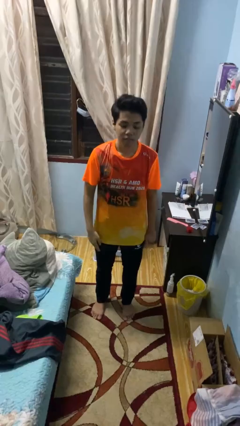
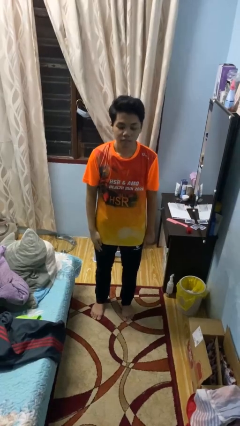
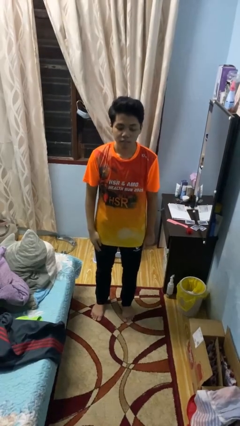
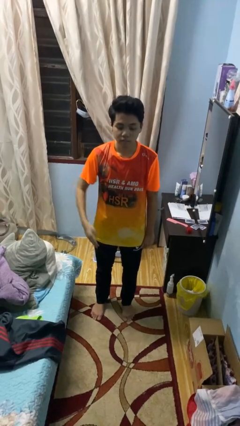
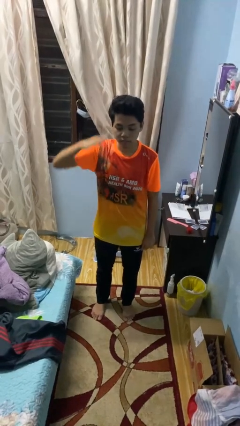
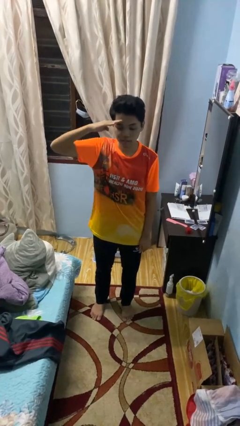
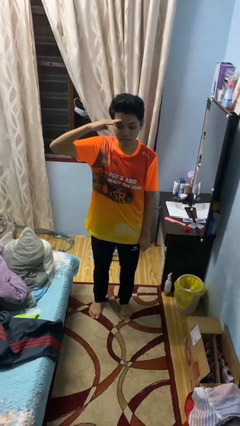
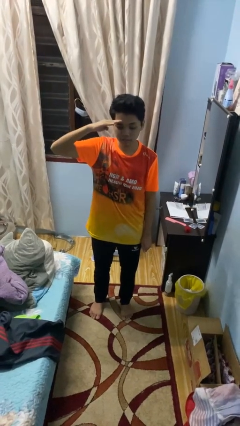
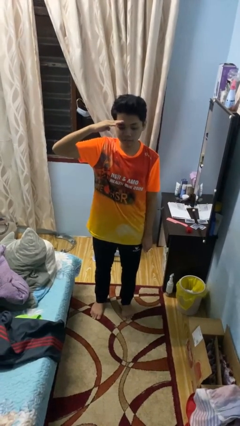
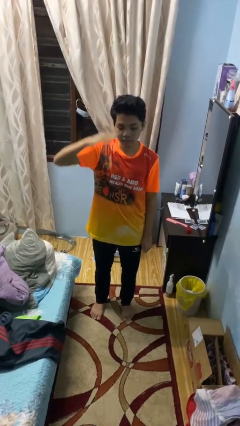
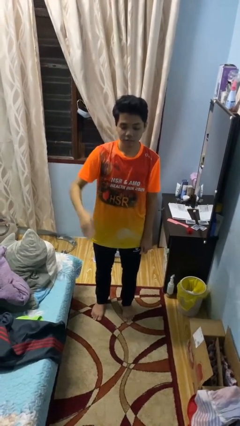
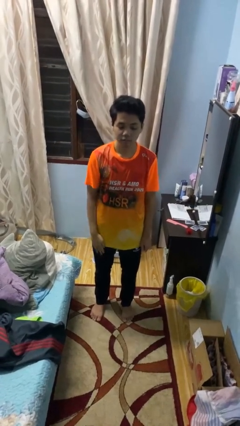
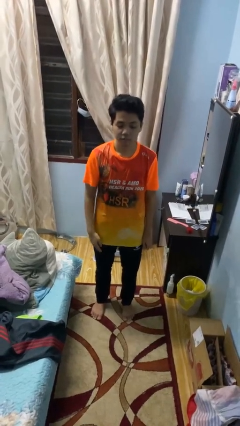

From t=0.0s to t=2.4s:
person salutes

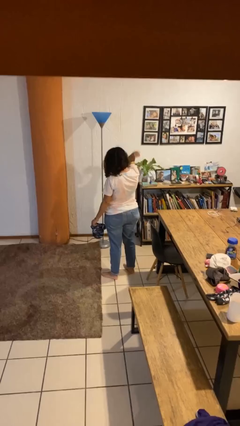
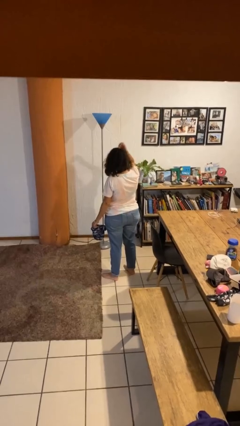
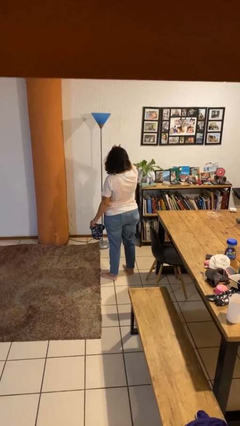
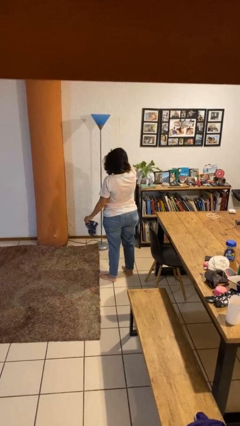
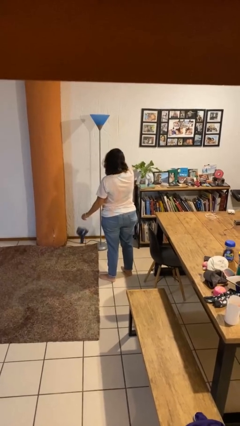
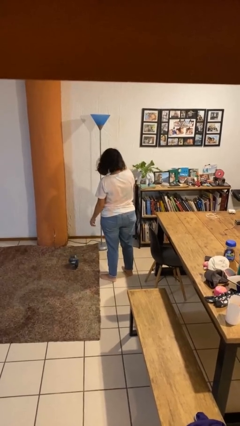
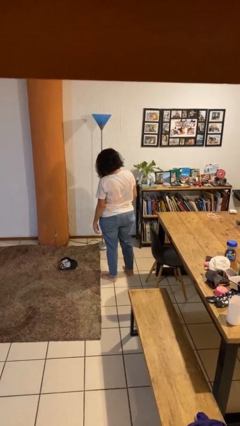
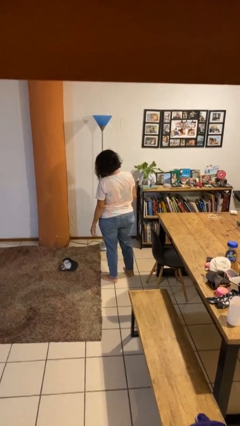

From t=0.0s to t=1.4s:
person throws object to ground

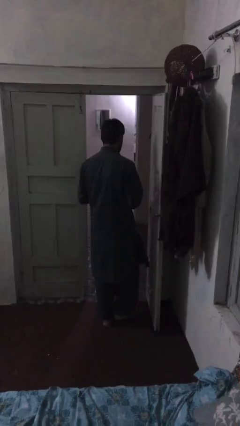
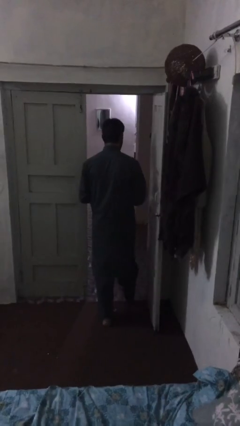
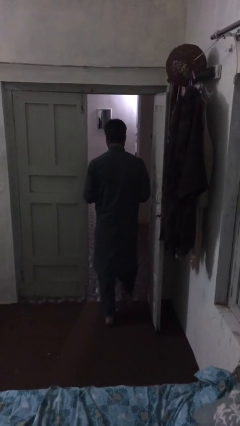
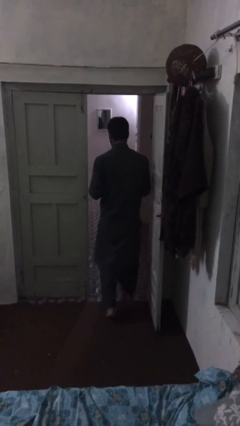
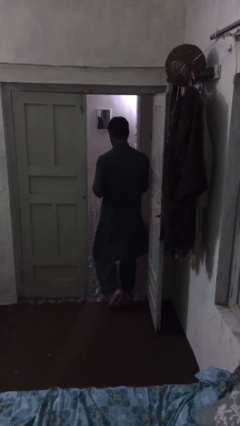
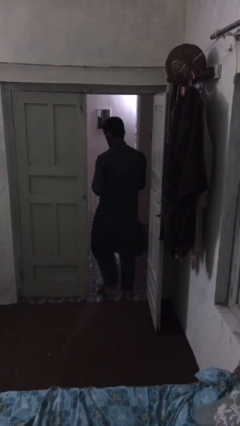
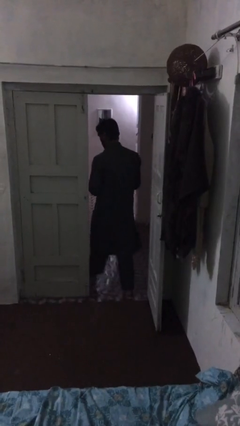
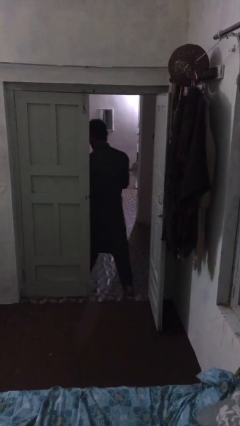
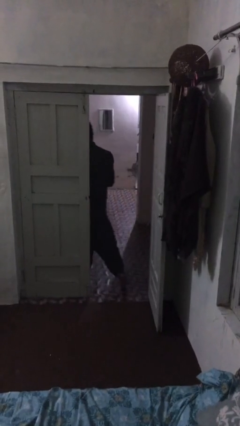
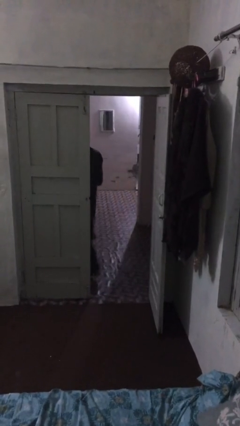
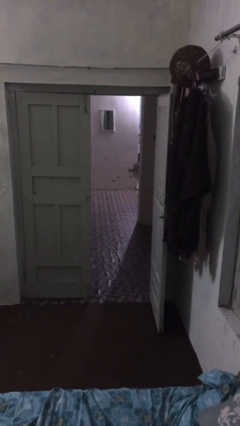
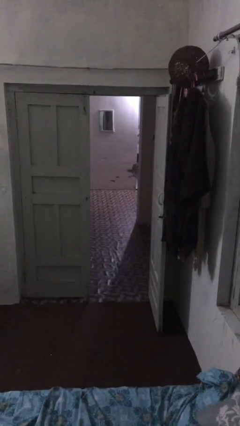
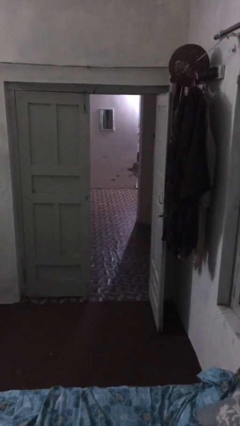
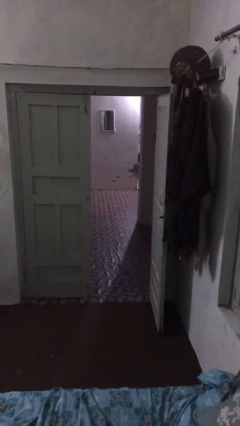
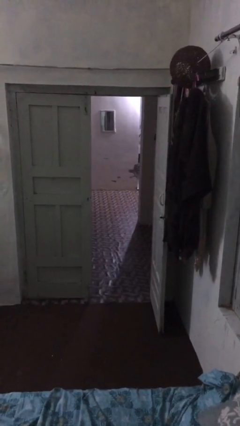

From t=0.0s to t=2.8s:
person exits scene through structure

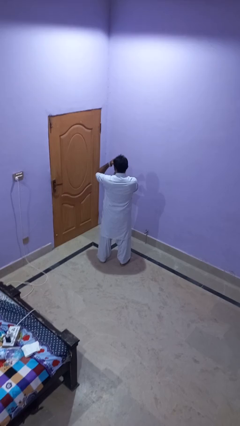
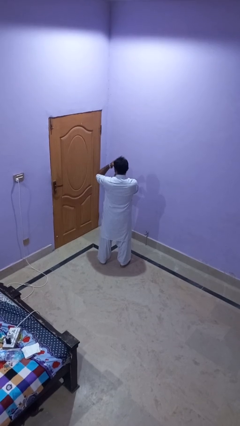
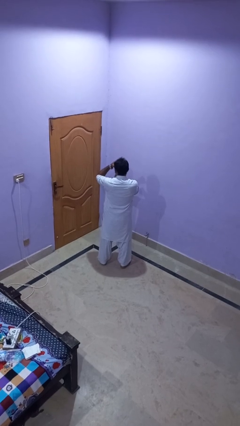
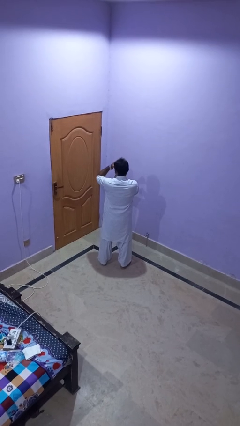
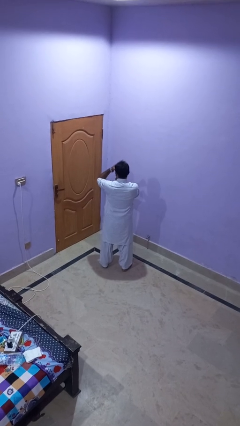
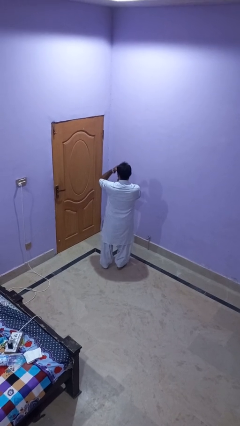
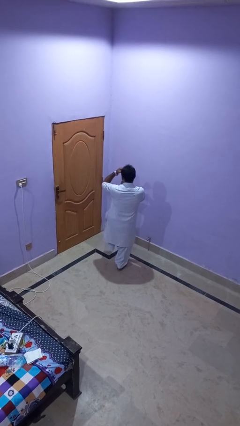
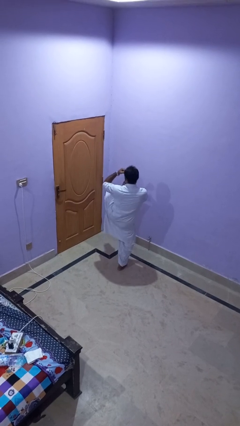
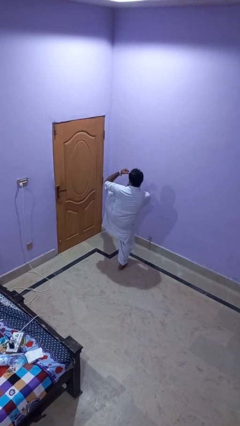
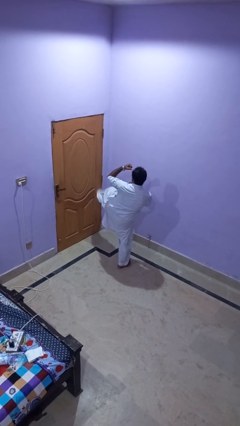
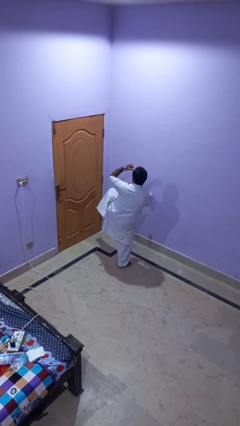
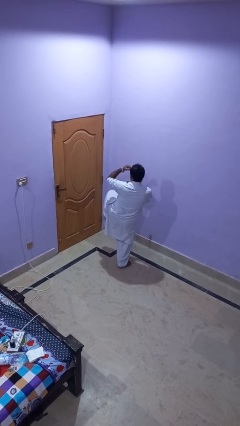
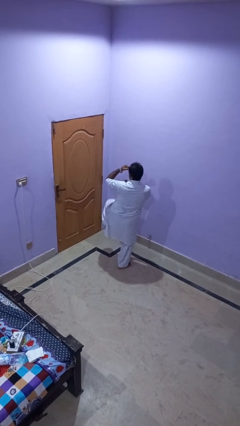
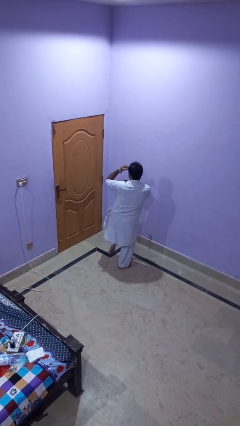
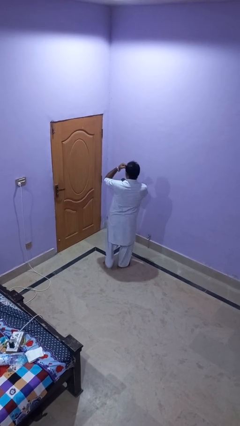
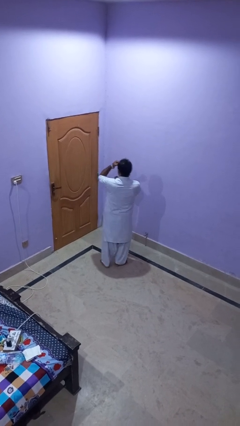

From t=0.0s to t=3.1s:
person karate kicks

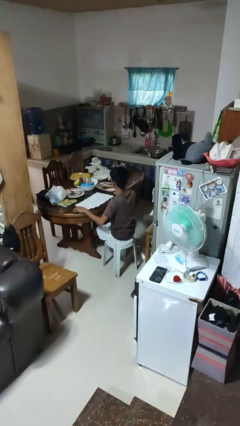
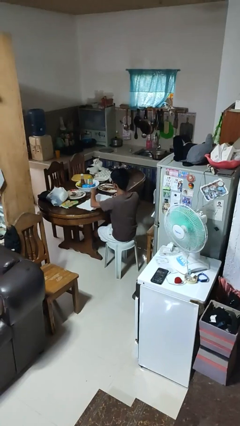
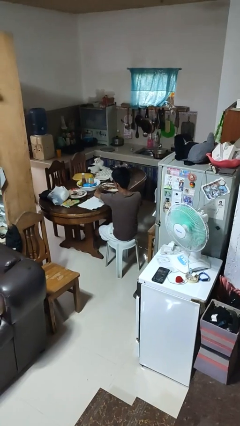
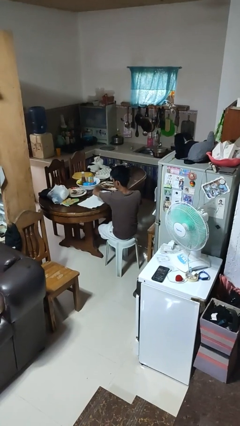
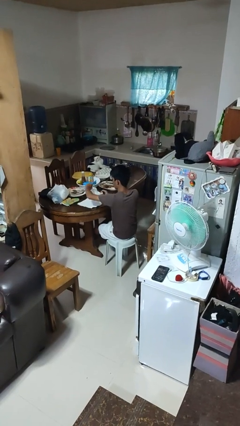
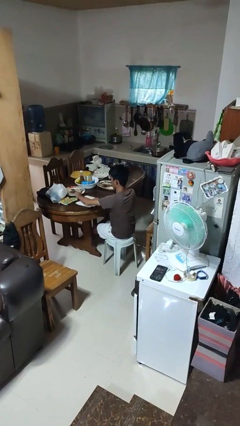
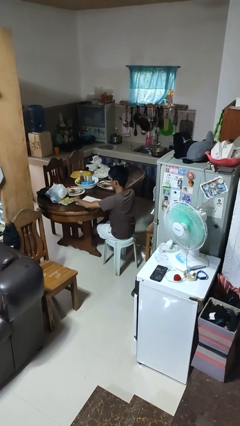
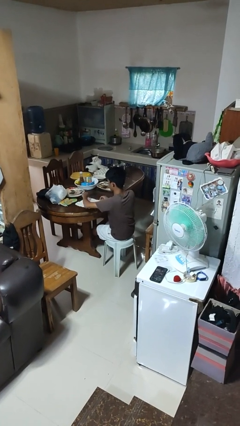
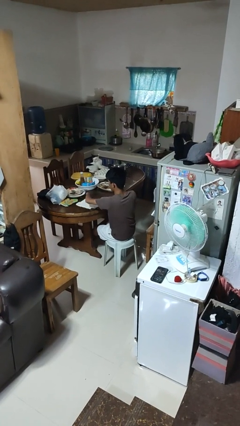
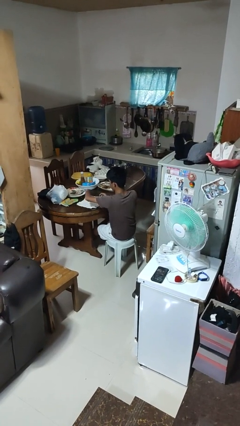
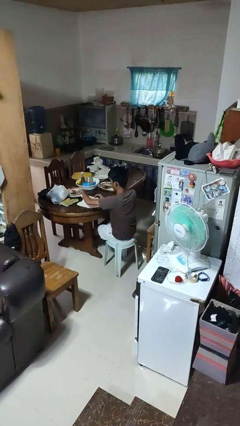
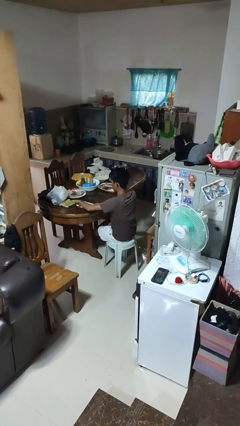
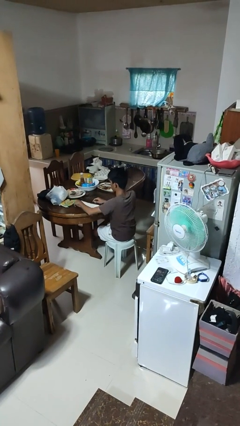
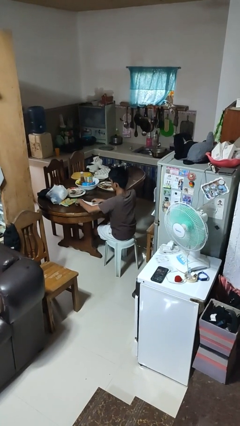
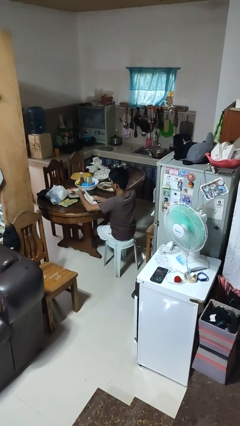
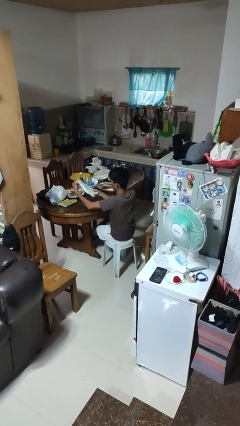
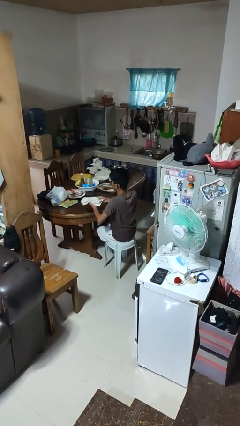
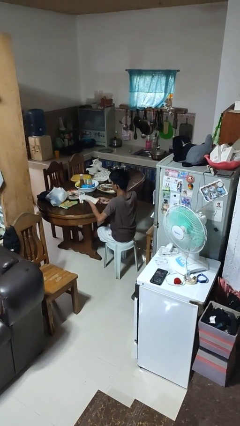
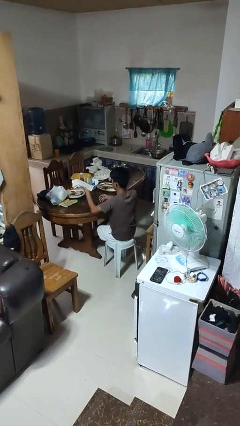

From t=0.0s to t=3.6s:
person folds tablecloth

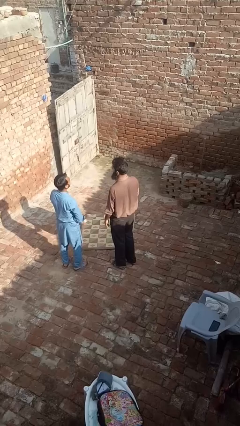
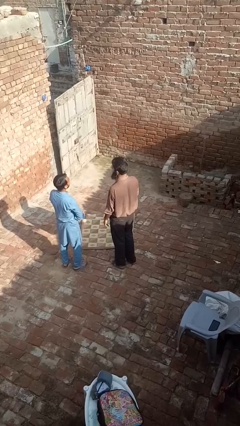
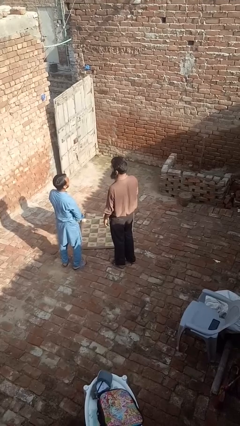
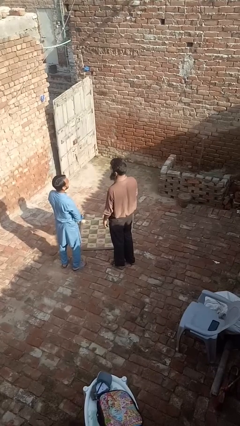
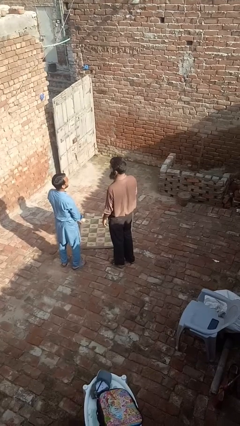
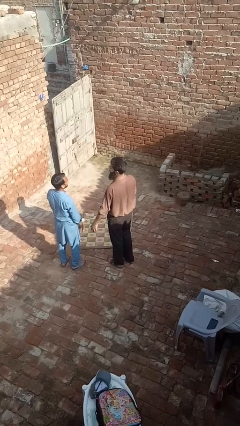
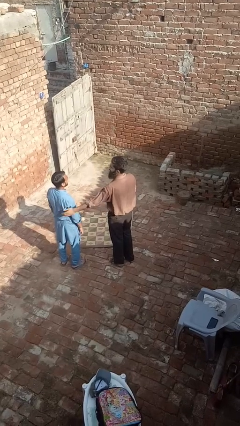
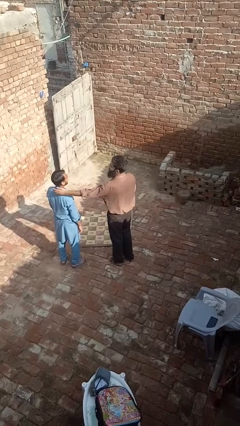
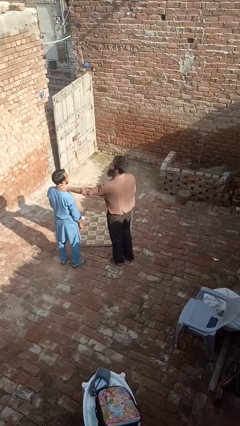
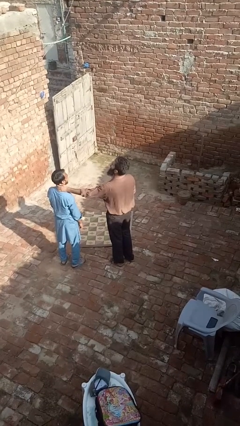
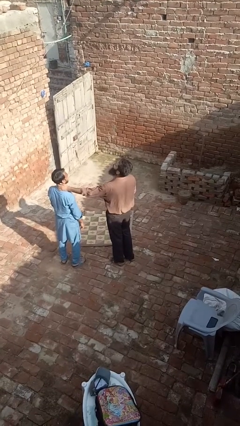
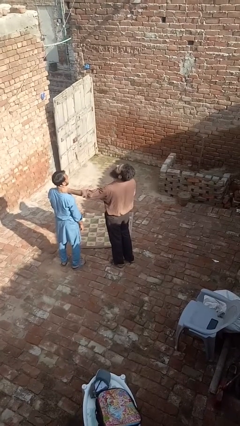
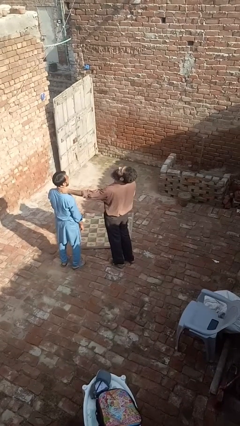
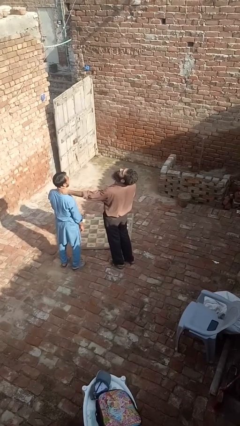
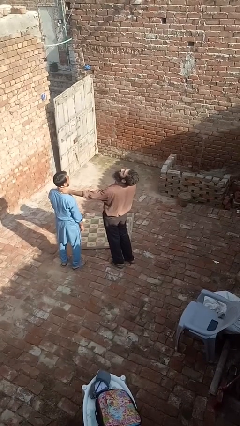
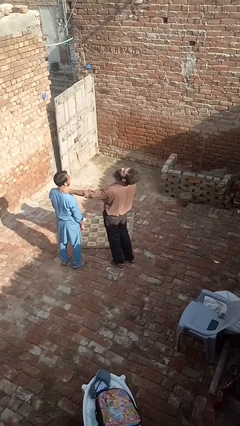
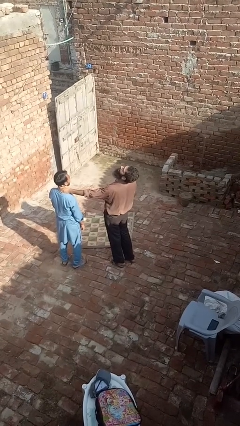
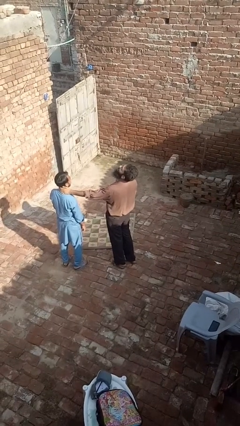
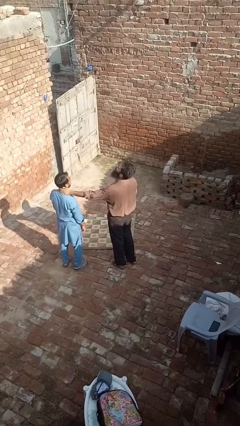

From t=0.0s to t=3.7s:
person laughs with person

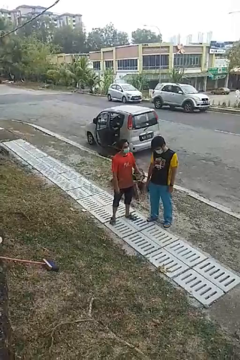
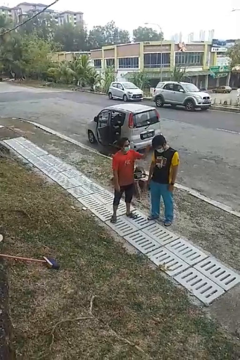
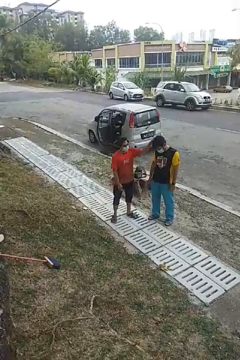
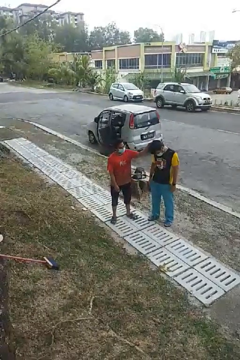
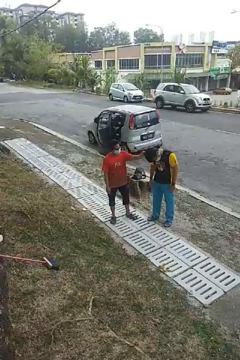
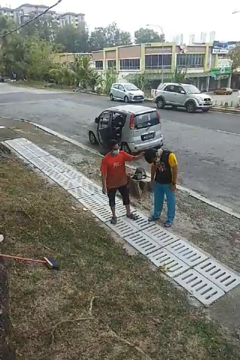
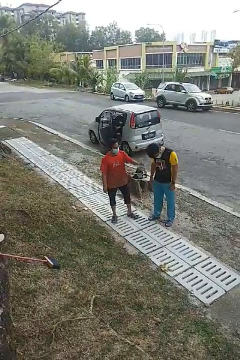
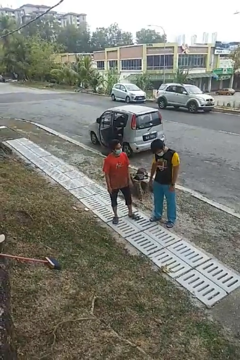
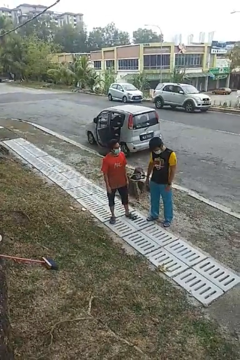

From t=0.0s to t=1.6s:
person grabs person by hair
